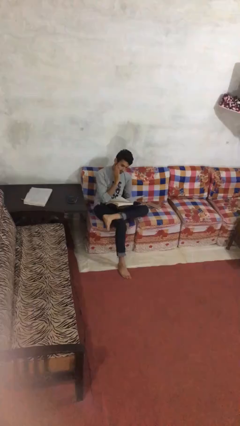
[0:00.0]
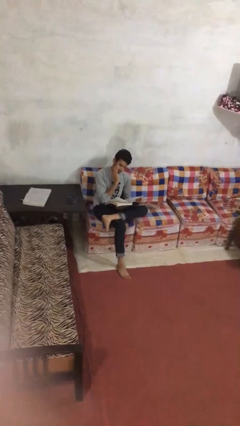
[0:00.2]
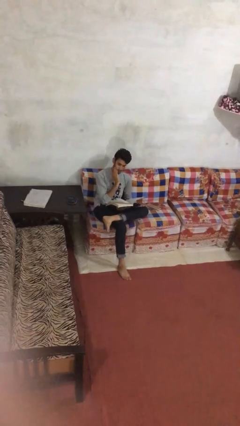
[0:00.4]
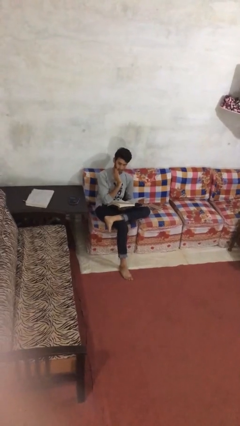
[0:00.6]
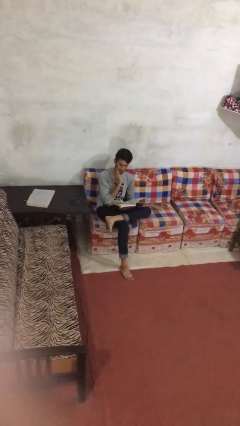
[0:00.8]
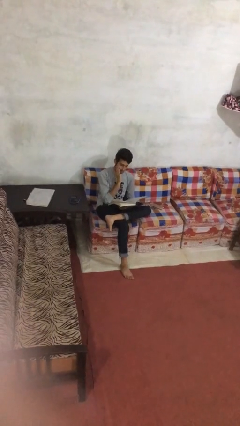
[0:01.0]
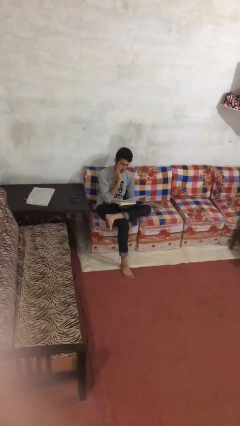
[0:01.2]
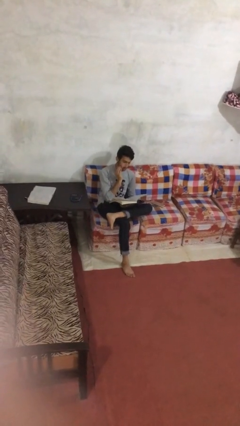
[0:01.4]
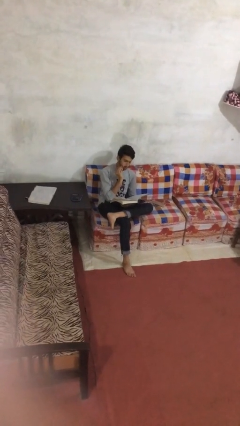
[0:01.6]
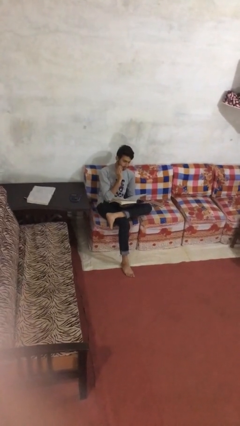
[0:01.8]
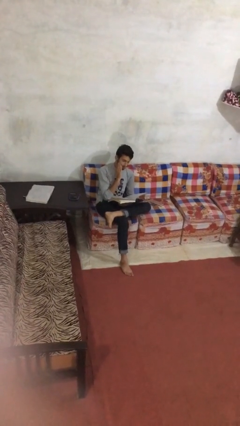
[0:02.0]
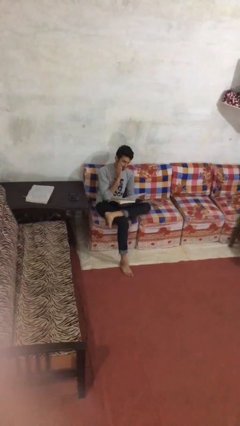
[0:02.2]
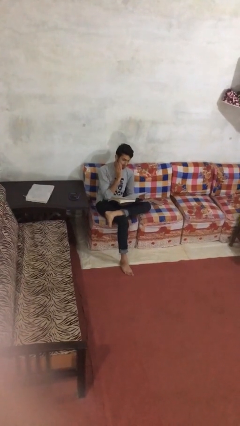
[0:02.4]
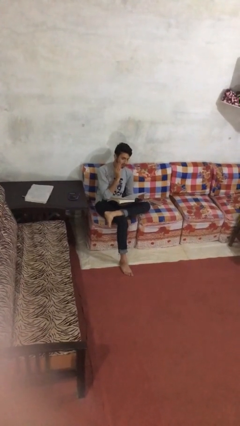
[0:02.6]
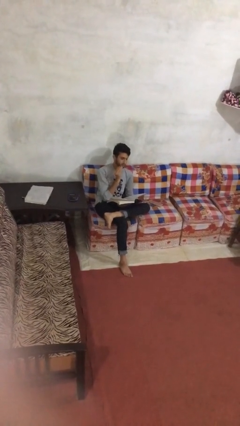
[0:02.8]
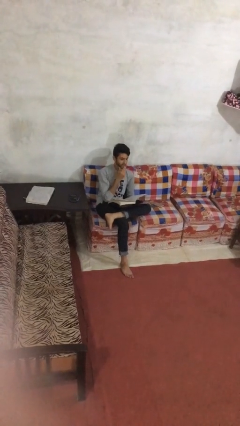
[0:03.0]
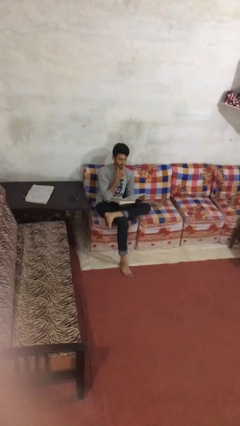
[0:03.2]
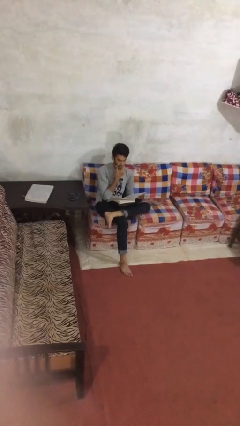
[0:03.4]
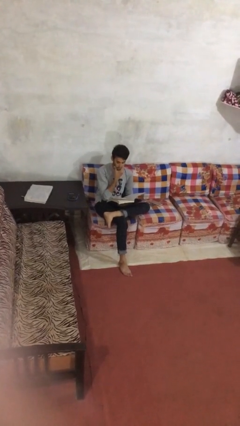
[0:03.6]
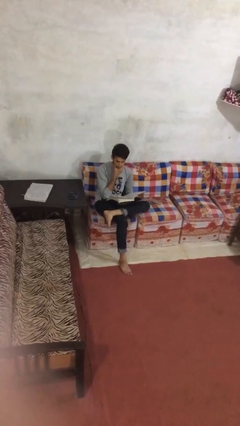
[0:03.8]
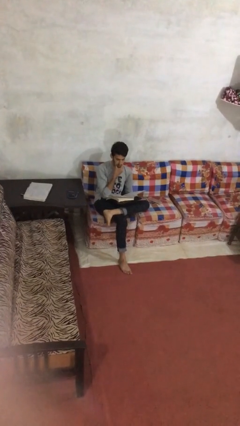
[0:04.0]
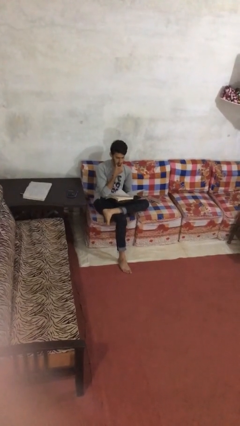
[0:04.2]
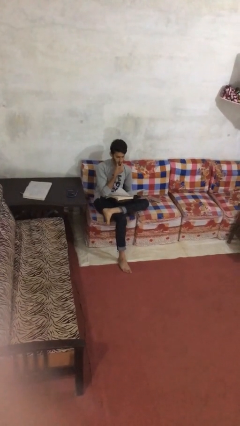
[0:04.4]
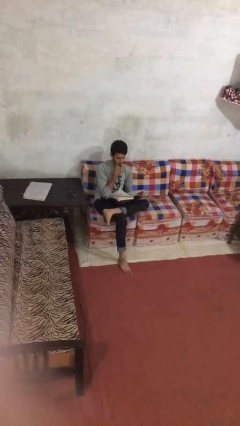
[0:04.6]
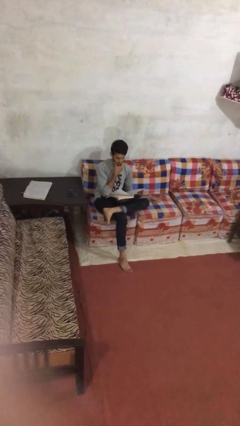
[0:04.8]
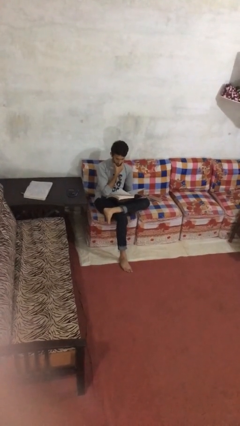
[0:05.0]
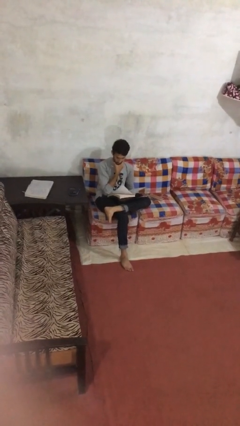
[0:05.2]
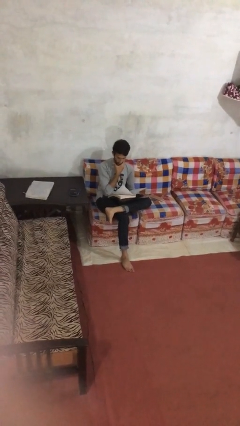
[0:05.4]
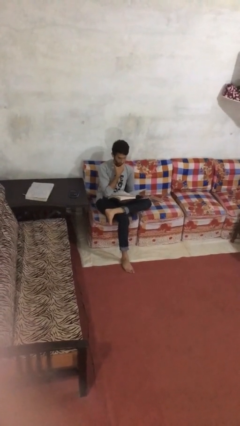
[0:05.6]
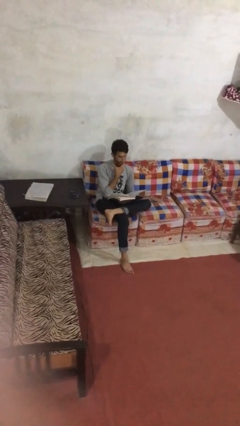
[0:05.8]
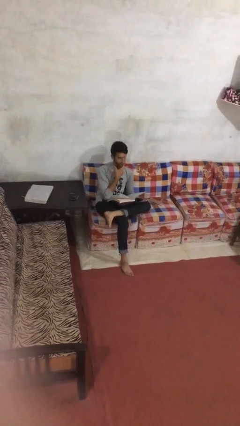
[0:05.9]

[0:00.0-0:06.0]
person reads document

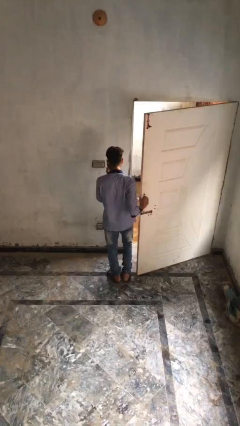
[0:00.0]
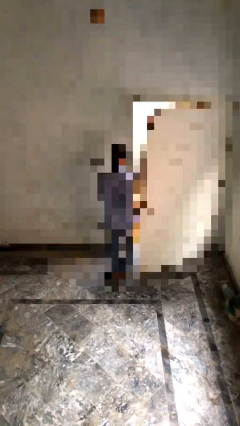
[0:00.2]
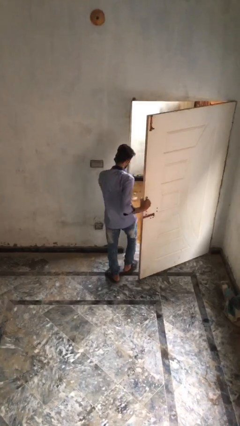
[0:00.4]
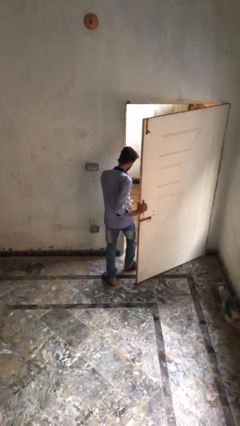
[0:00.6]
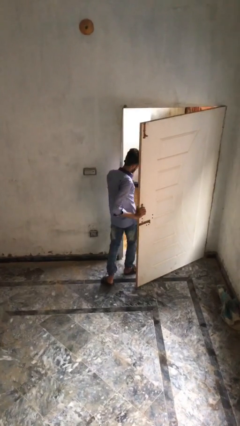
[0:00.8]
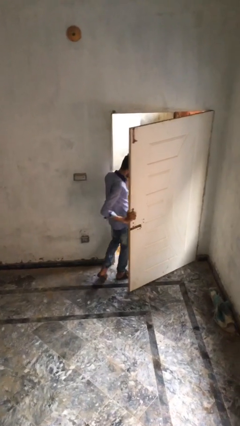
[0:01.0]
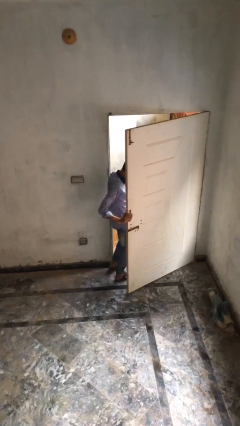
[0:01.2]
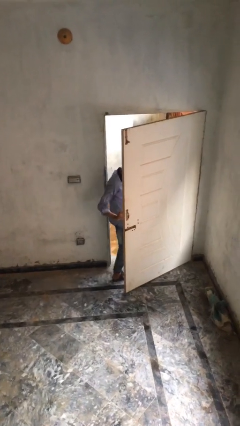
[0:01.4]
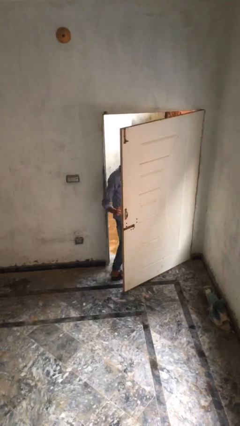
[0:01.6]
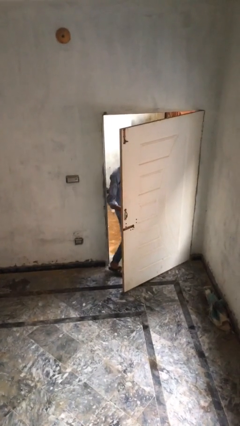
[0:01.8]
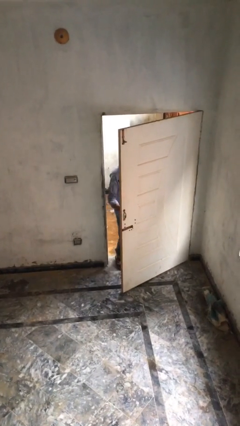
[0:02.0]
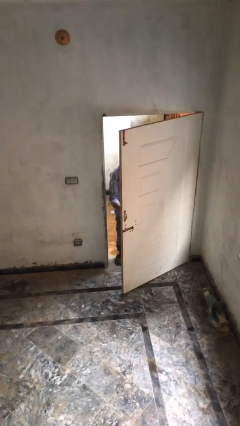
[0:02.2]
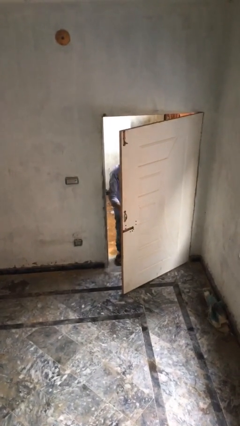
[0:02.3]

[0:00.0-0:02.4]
person exits scene through structure

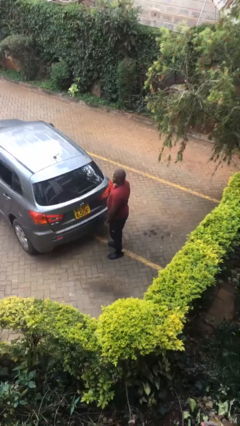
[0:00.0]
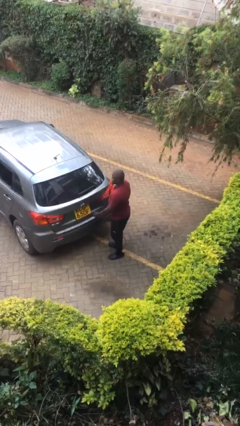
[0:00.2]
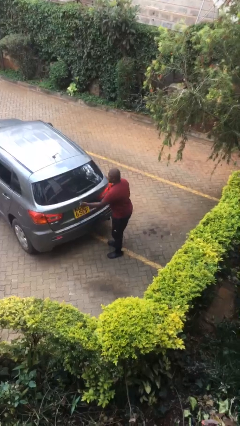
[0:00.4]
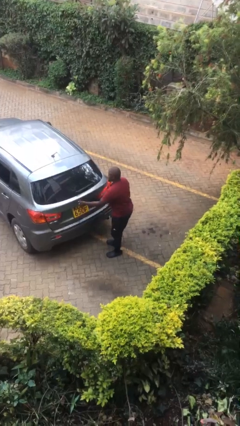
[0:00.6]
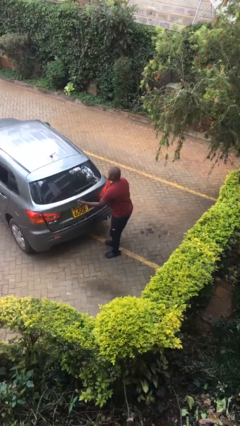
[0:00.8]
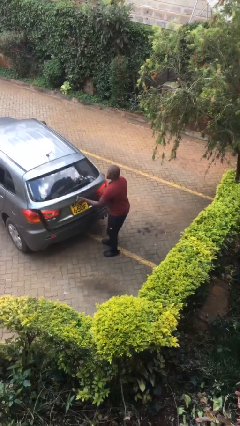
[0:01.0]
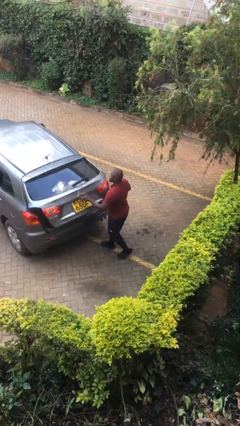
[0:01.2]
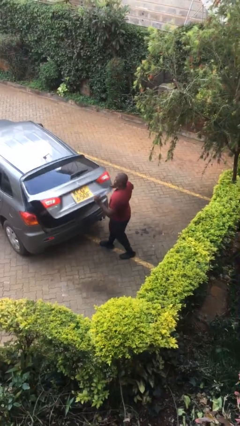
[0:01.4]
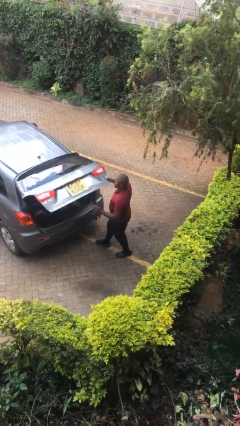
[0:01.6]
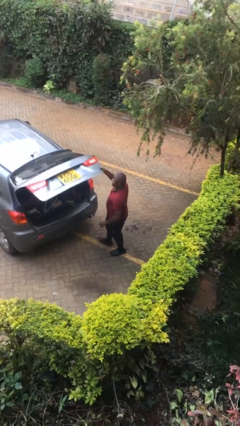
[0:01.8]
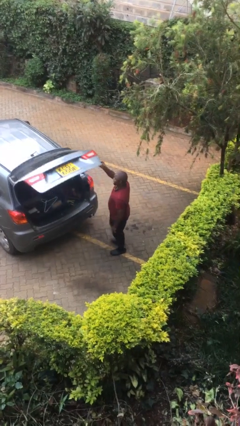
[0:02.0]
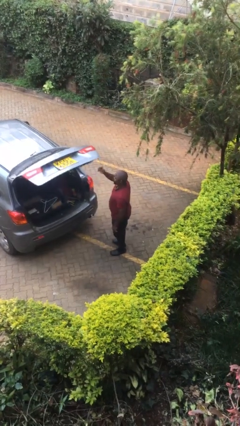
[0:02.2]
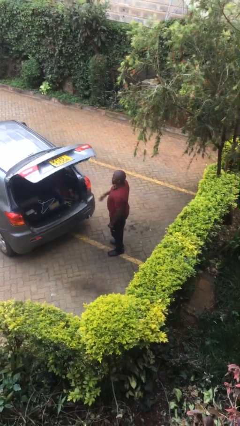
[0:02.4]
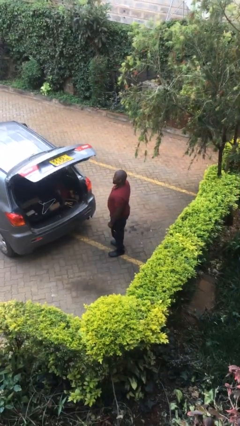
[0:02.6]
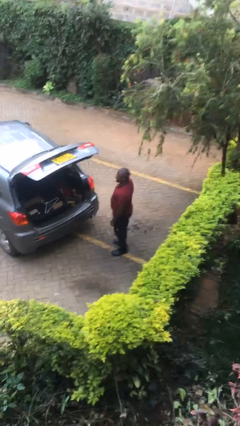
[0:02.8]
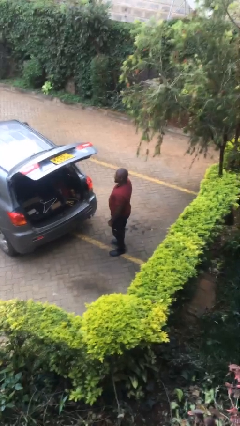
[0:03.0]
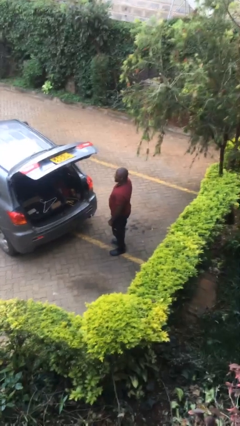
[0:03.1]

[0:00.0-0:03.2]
person opens car trunk

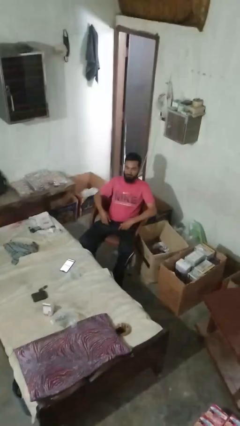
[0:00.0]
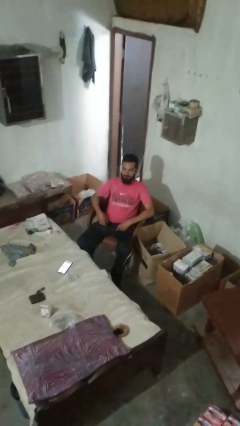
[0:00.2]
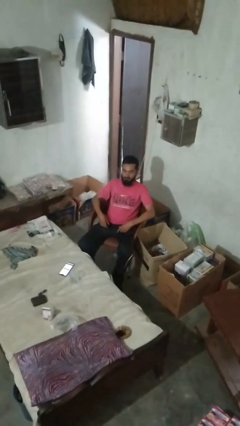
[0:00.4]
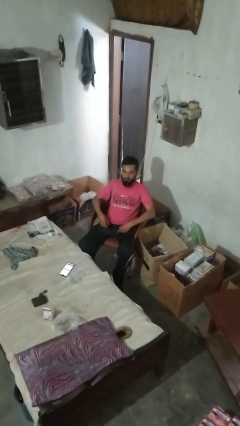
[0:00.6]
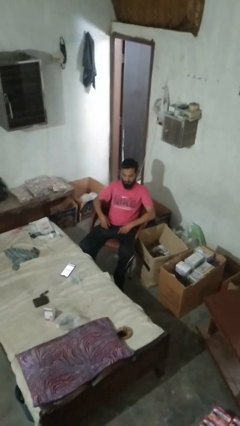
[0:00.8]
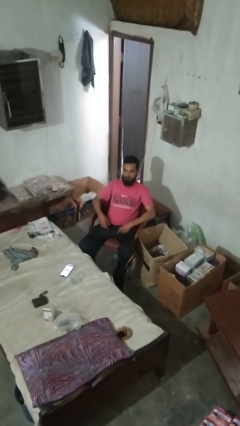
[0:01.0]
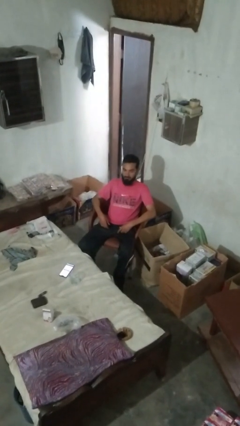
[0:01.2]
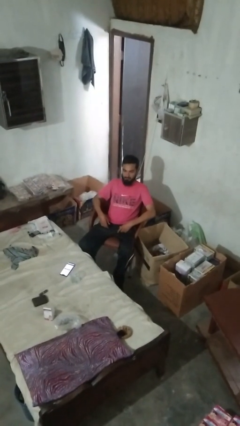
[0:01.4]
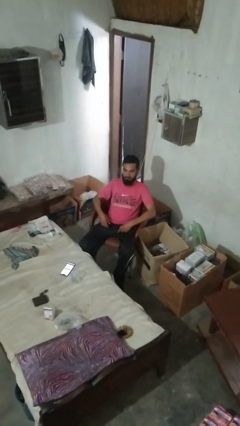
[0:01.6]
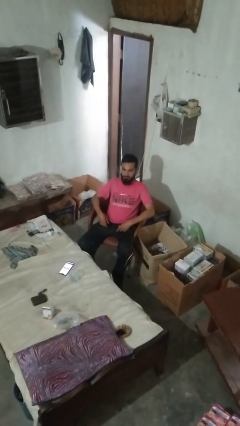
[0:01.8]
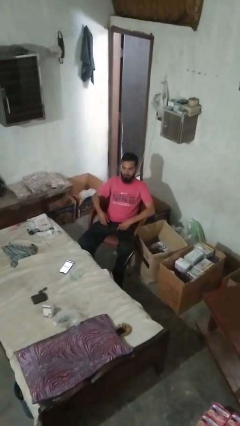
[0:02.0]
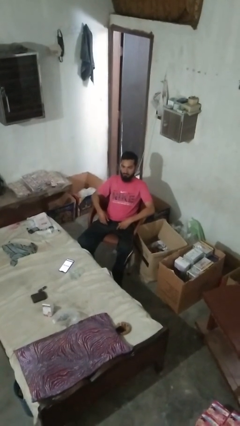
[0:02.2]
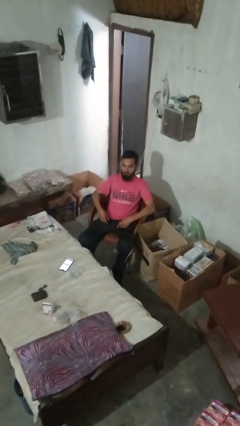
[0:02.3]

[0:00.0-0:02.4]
person nods head

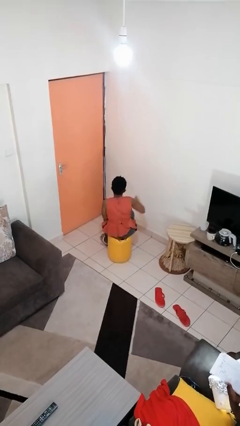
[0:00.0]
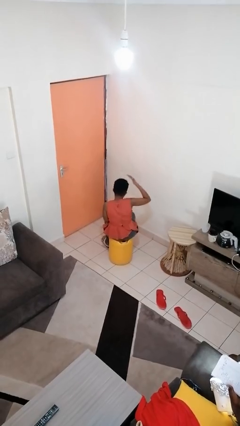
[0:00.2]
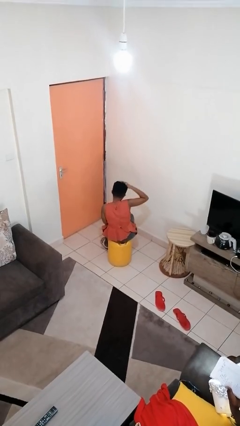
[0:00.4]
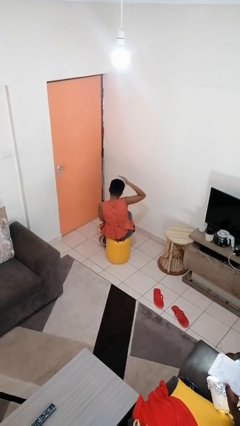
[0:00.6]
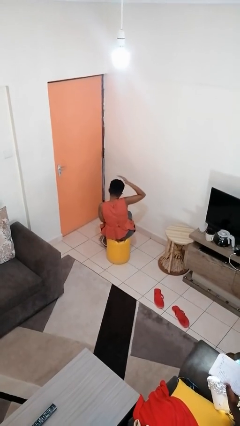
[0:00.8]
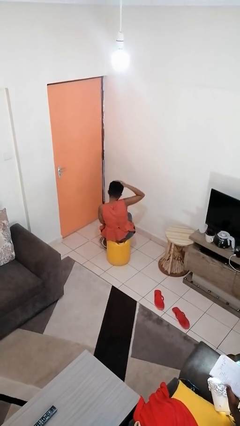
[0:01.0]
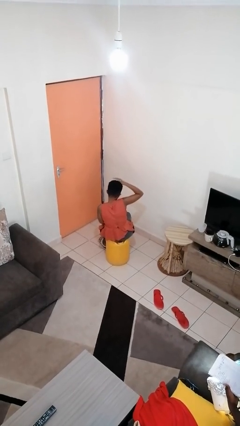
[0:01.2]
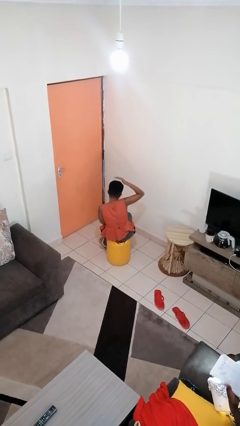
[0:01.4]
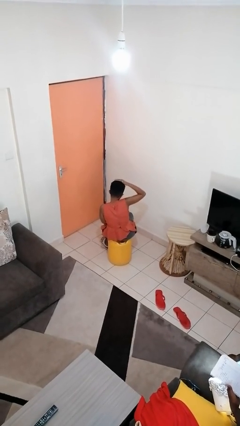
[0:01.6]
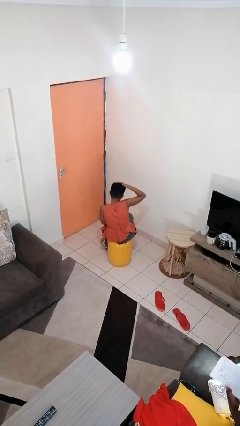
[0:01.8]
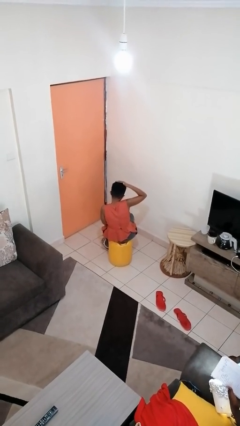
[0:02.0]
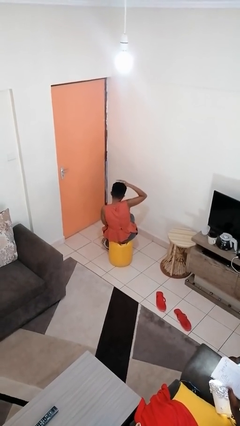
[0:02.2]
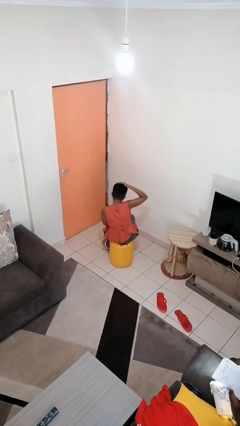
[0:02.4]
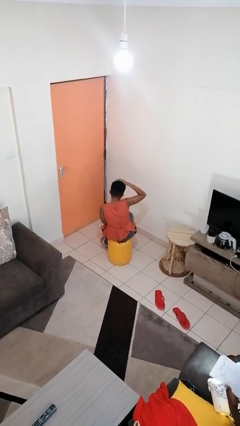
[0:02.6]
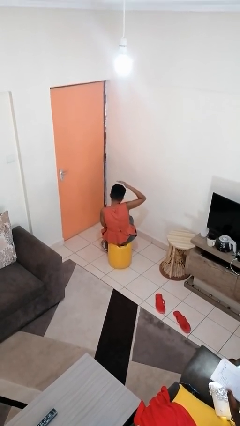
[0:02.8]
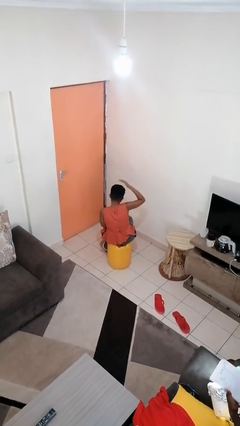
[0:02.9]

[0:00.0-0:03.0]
person pats head

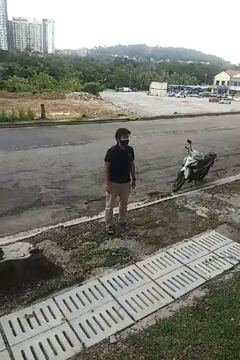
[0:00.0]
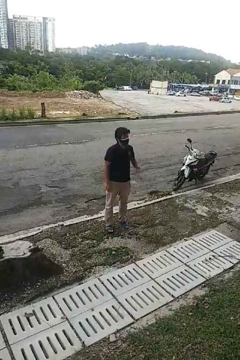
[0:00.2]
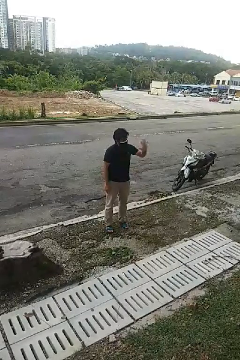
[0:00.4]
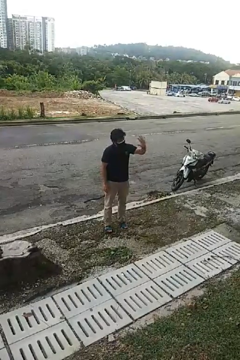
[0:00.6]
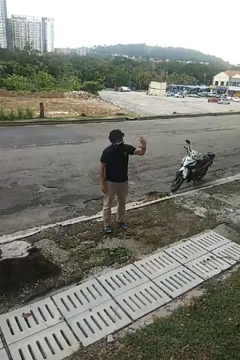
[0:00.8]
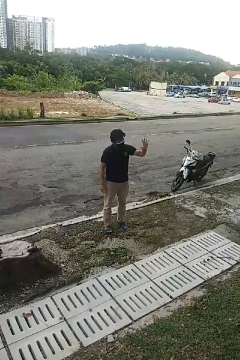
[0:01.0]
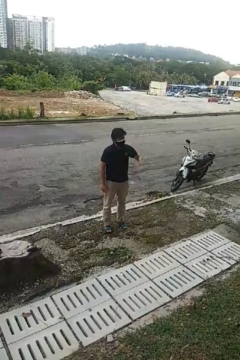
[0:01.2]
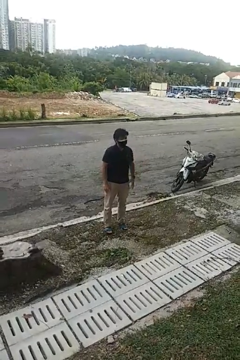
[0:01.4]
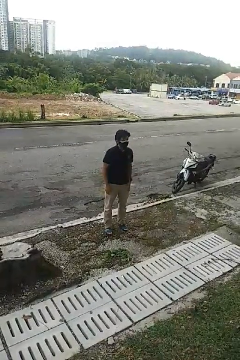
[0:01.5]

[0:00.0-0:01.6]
person gestures number five
